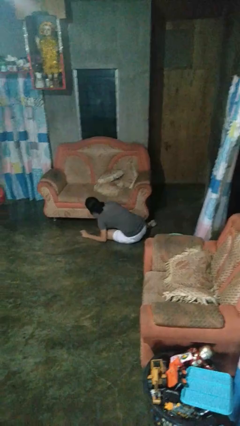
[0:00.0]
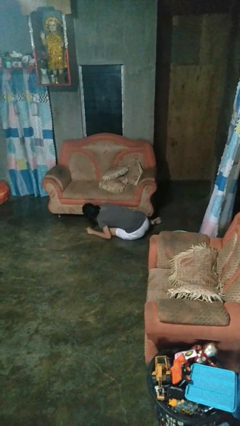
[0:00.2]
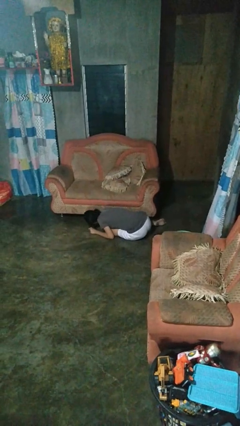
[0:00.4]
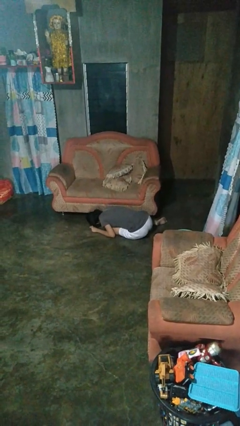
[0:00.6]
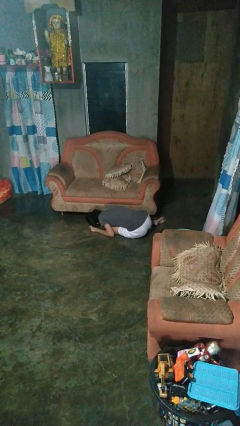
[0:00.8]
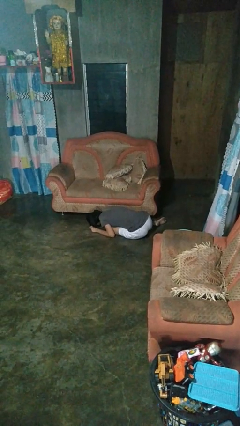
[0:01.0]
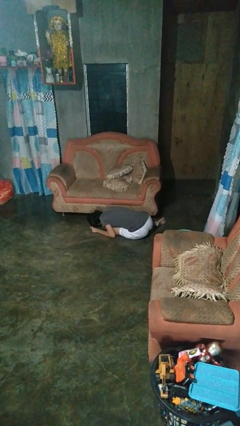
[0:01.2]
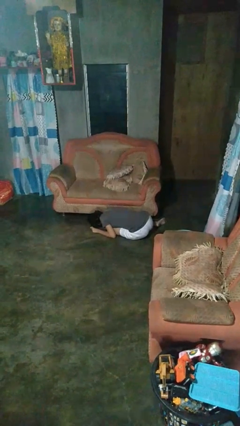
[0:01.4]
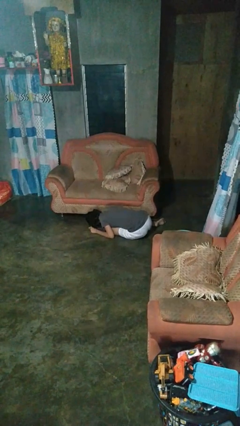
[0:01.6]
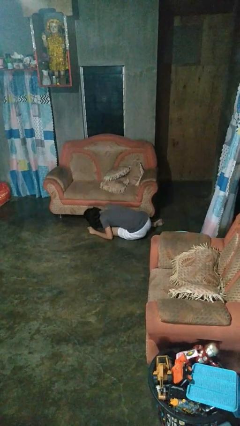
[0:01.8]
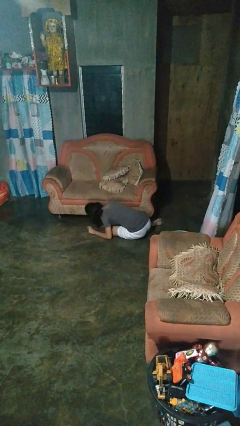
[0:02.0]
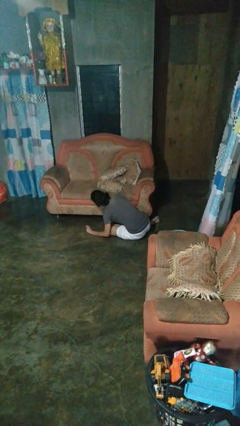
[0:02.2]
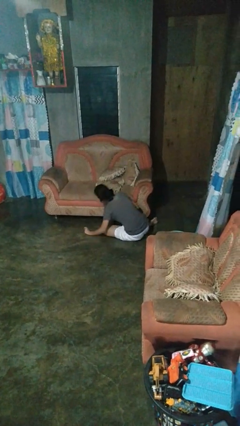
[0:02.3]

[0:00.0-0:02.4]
person searches under couch

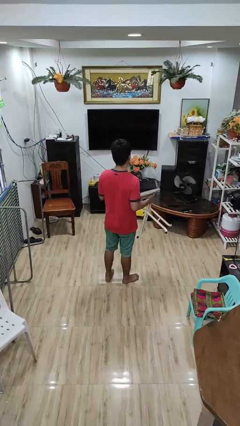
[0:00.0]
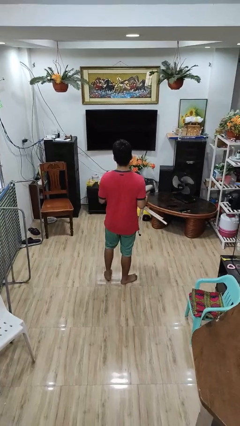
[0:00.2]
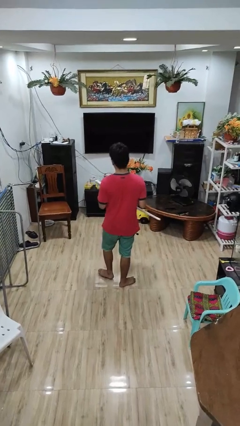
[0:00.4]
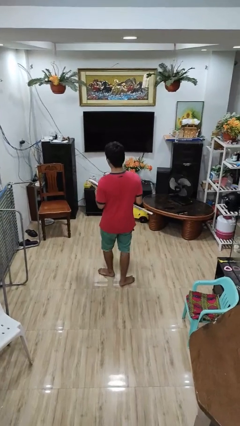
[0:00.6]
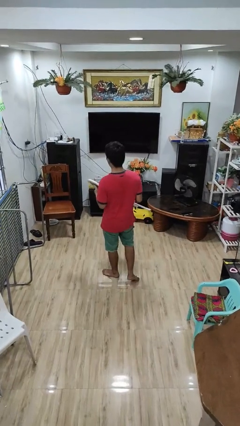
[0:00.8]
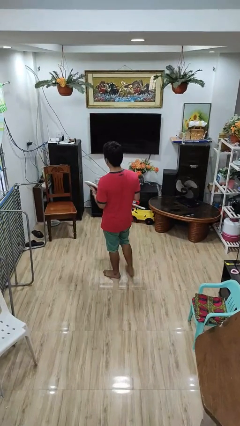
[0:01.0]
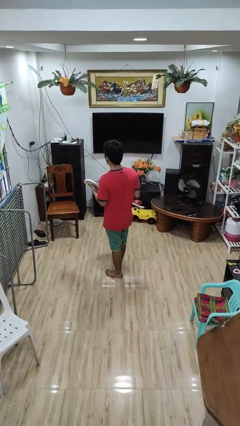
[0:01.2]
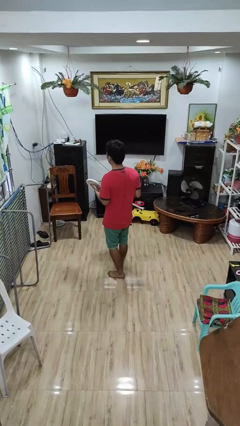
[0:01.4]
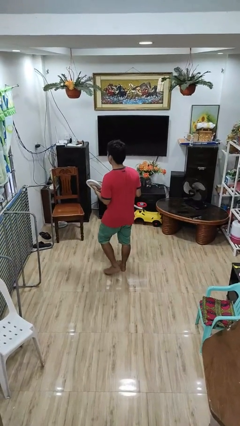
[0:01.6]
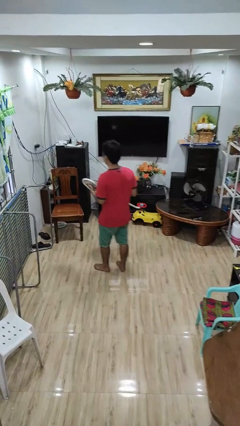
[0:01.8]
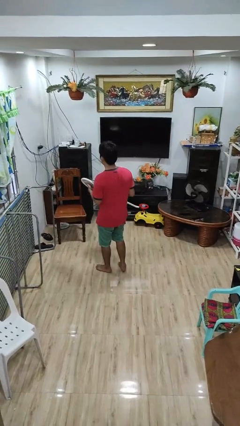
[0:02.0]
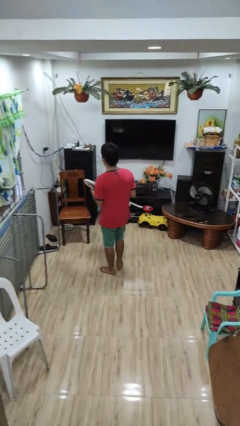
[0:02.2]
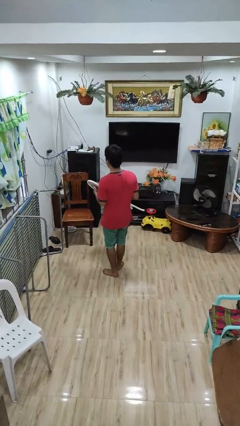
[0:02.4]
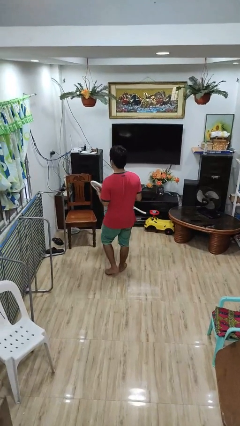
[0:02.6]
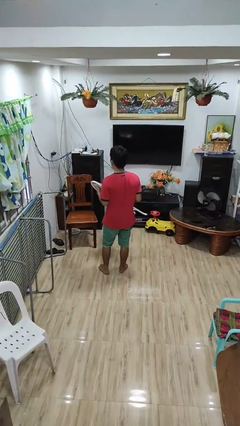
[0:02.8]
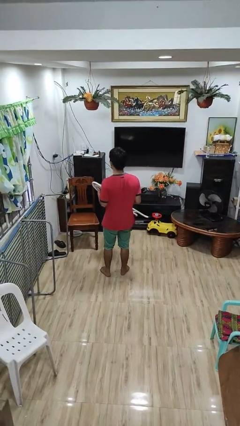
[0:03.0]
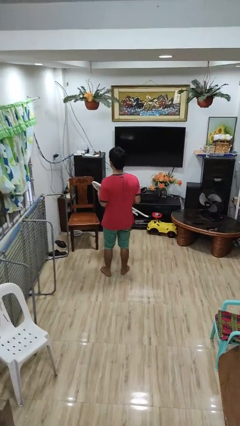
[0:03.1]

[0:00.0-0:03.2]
person carries furniture

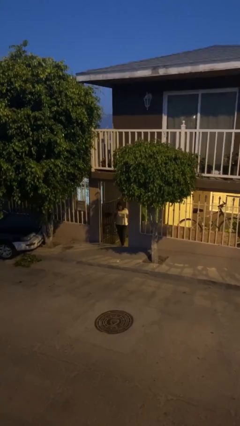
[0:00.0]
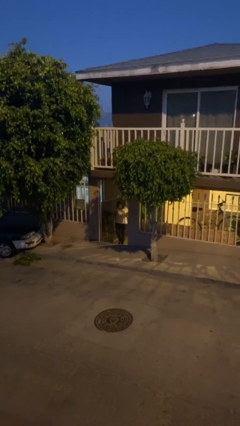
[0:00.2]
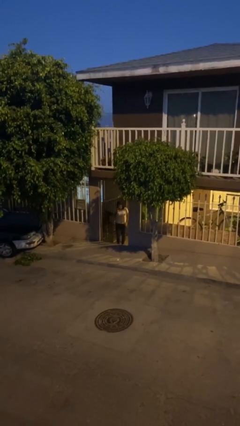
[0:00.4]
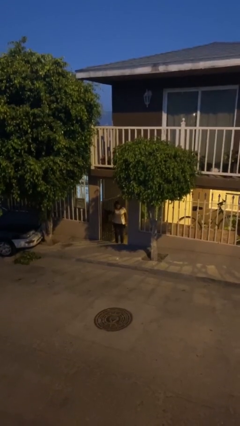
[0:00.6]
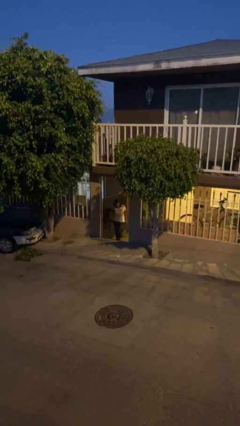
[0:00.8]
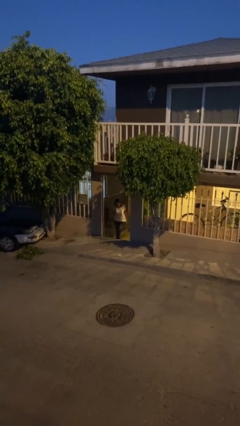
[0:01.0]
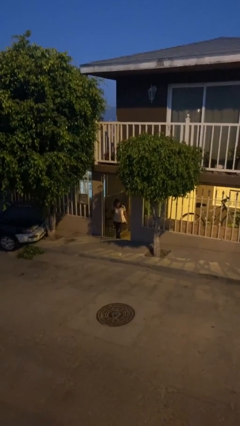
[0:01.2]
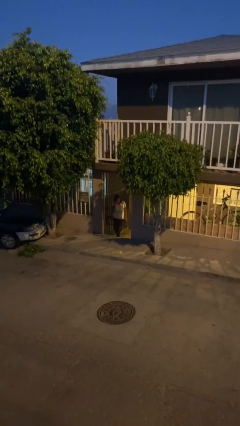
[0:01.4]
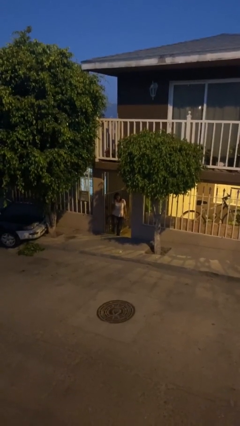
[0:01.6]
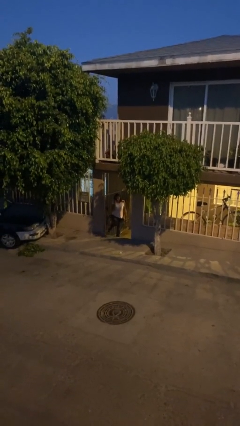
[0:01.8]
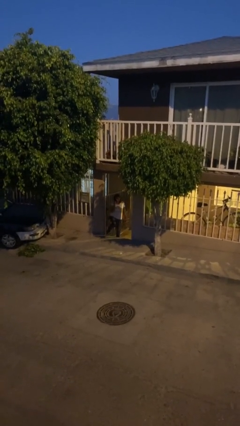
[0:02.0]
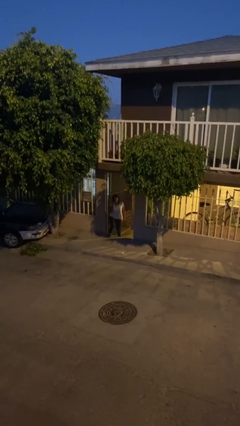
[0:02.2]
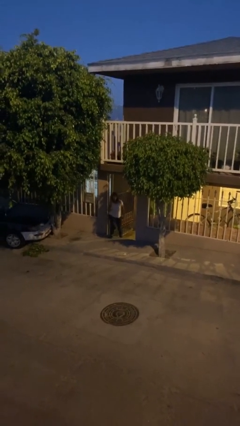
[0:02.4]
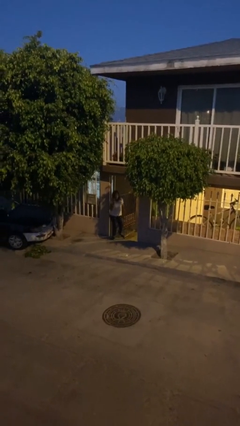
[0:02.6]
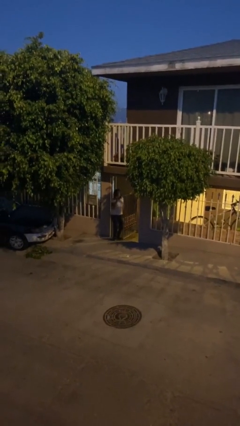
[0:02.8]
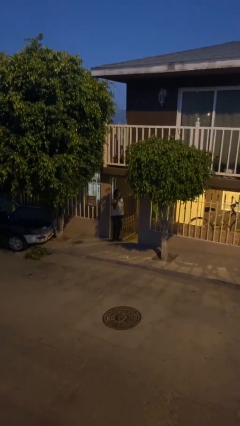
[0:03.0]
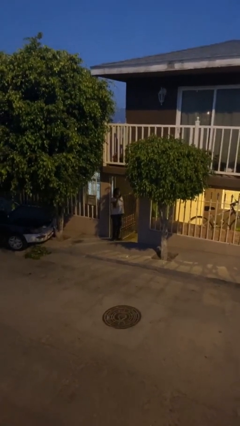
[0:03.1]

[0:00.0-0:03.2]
person enters scene through structure

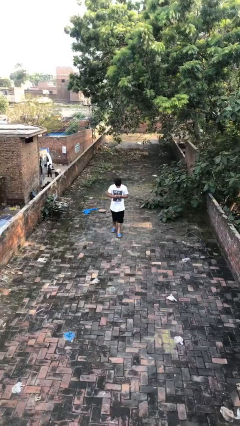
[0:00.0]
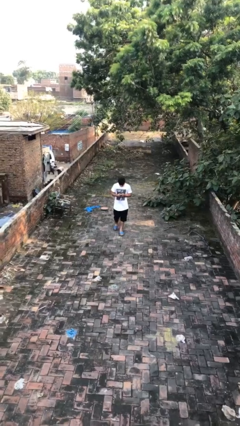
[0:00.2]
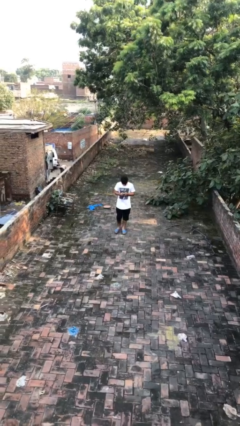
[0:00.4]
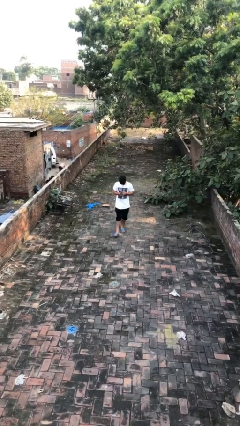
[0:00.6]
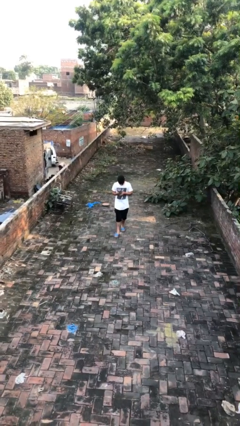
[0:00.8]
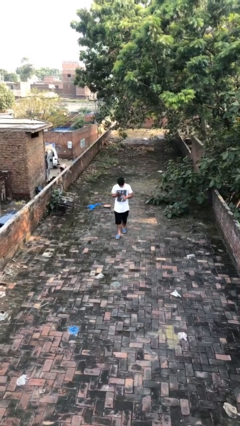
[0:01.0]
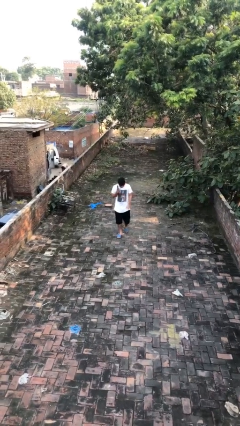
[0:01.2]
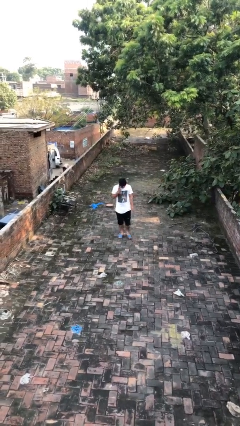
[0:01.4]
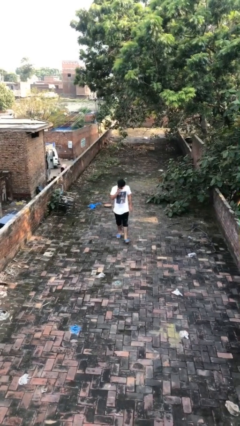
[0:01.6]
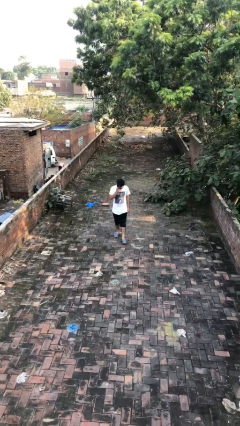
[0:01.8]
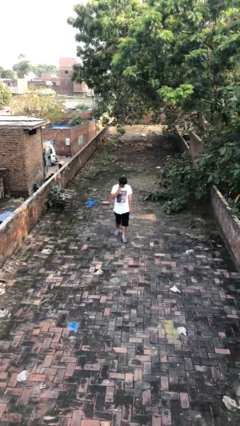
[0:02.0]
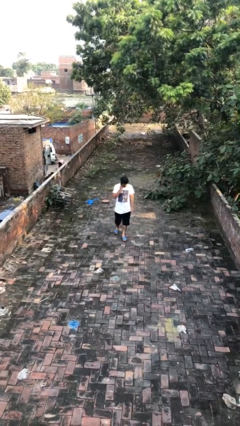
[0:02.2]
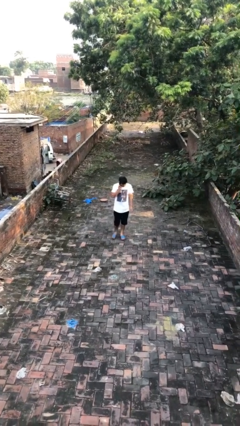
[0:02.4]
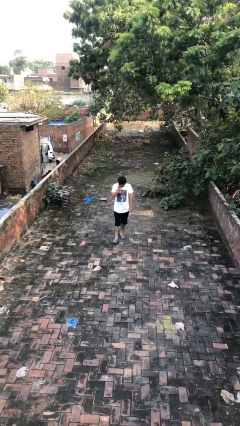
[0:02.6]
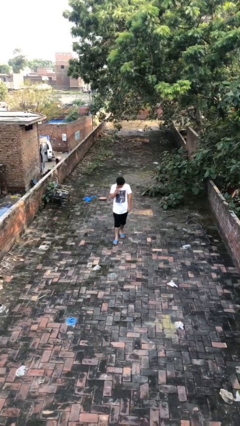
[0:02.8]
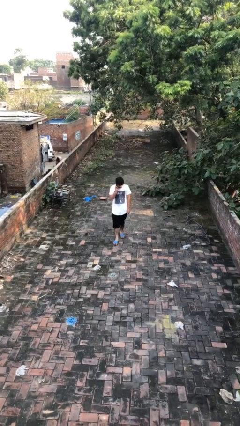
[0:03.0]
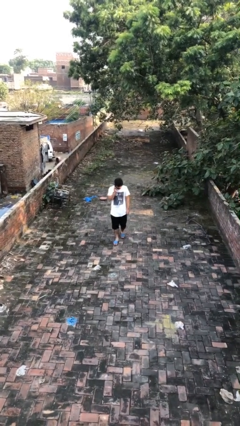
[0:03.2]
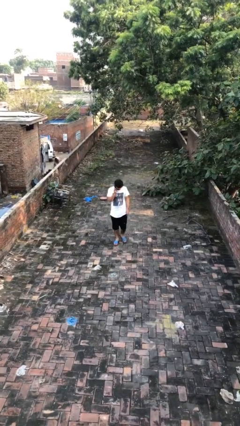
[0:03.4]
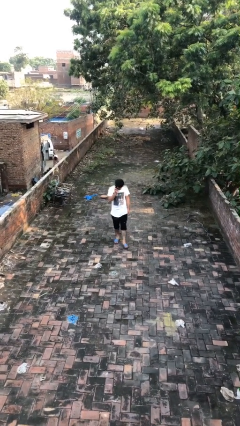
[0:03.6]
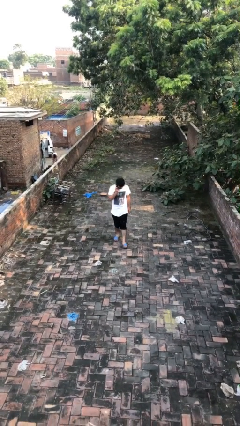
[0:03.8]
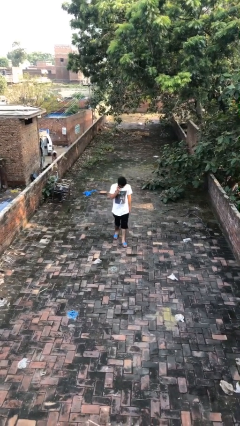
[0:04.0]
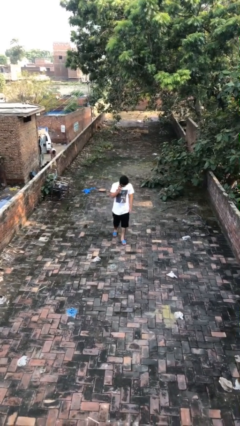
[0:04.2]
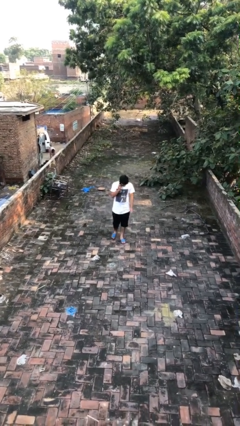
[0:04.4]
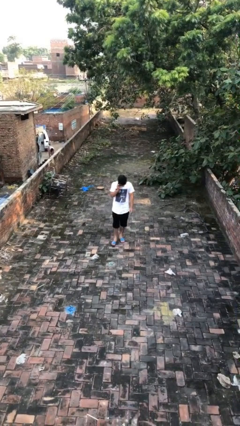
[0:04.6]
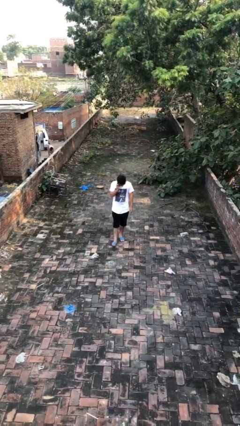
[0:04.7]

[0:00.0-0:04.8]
person talks on phone

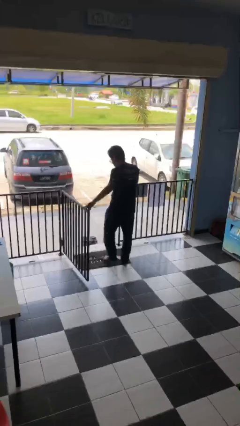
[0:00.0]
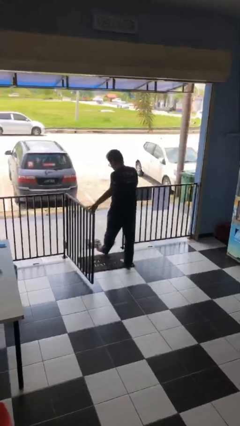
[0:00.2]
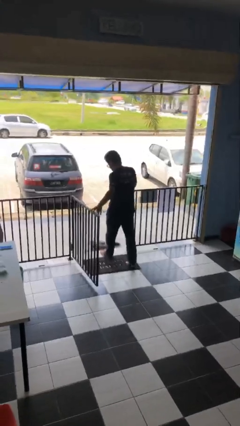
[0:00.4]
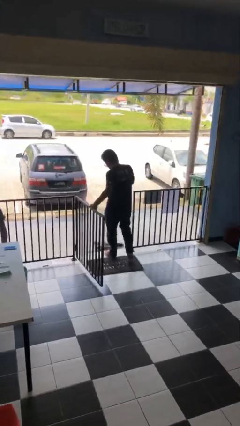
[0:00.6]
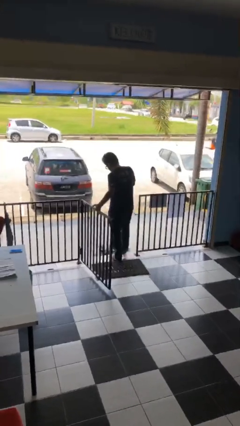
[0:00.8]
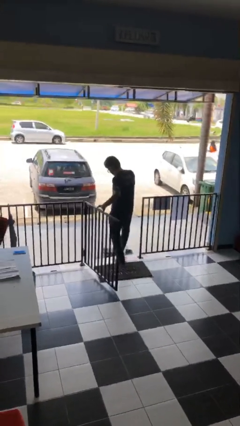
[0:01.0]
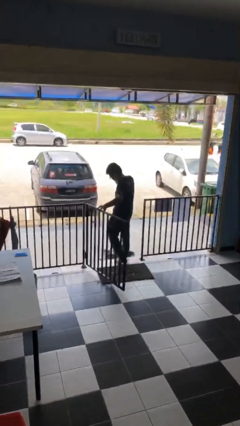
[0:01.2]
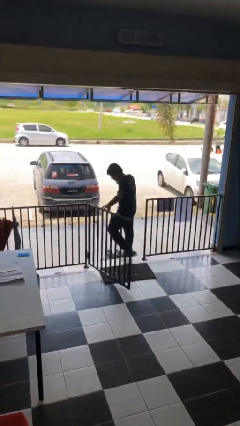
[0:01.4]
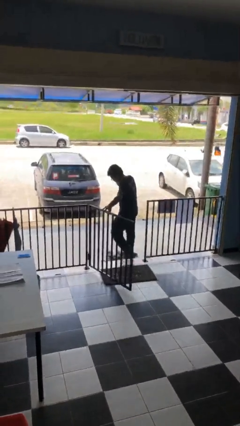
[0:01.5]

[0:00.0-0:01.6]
person exits scene through structure

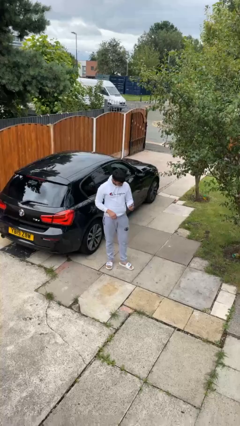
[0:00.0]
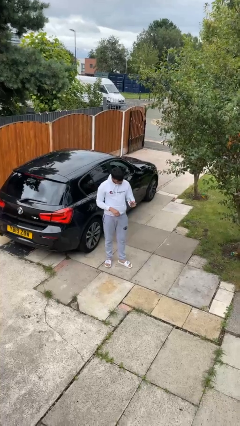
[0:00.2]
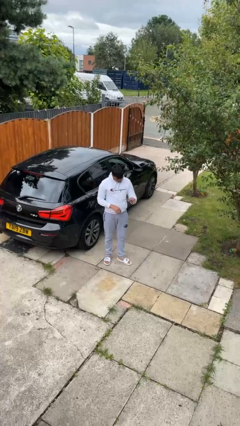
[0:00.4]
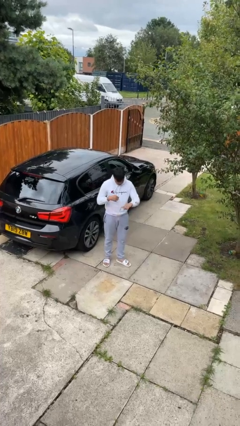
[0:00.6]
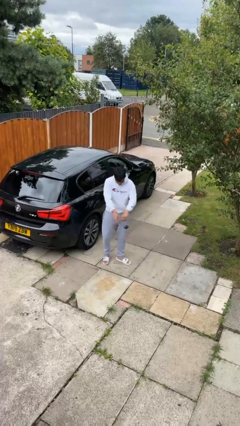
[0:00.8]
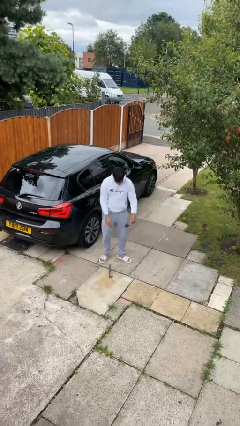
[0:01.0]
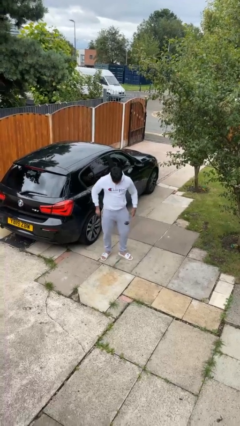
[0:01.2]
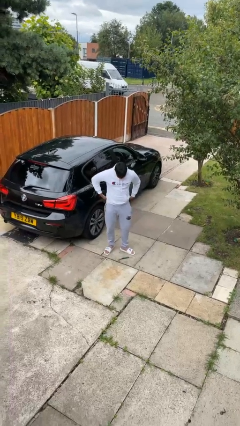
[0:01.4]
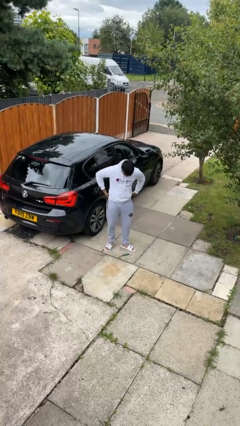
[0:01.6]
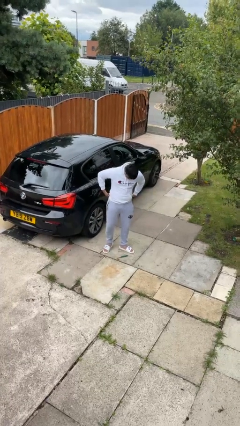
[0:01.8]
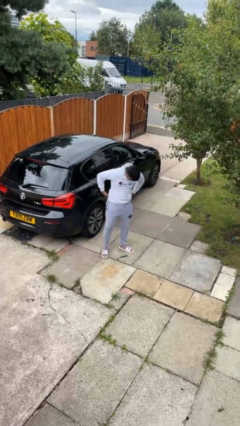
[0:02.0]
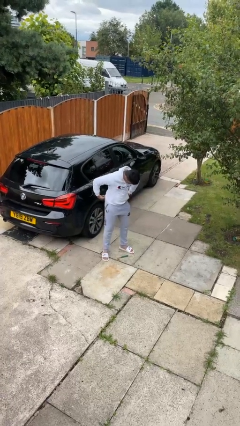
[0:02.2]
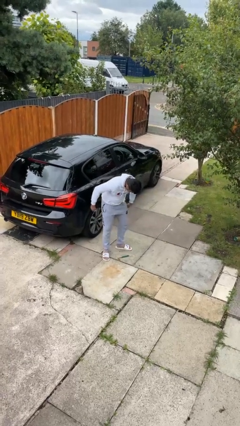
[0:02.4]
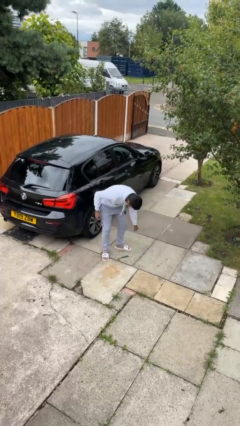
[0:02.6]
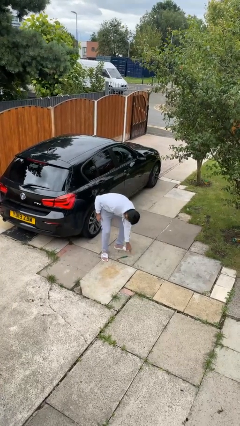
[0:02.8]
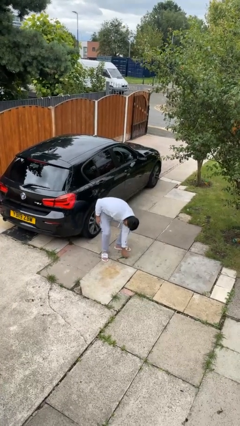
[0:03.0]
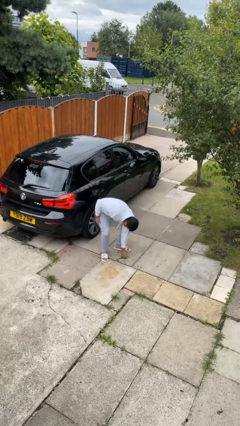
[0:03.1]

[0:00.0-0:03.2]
person drops object
